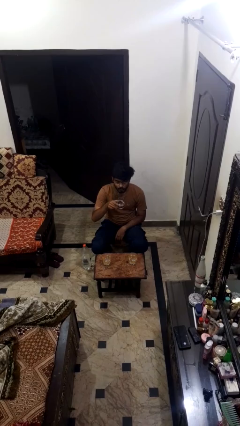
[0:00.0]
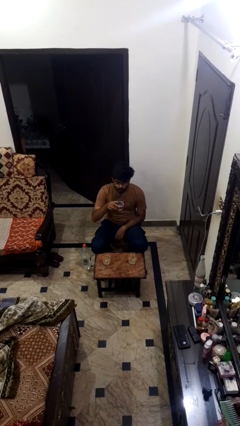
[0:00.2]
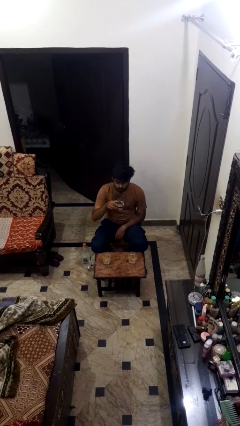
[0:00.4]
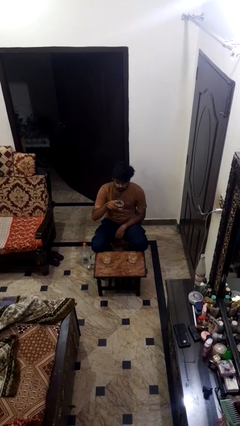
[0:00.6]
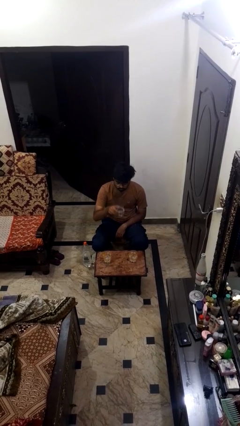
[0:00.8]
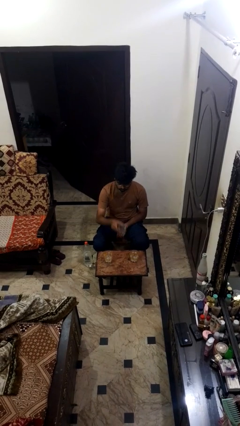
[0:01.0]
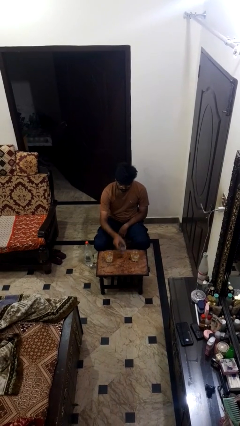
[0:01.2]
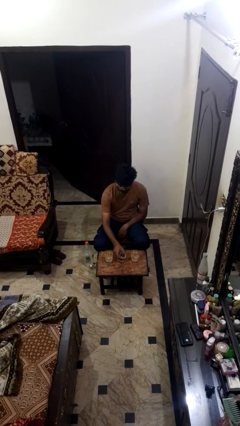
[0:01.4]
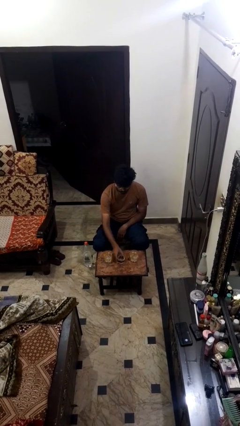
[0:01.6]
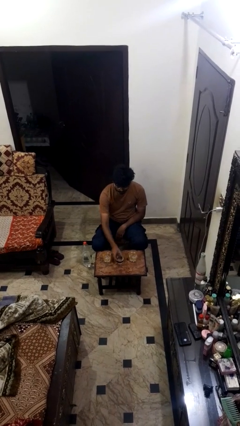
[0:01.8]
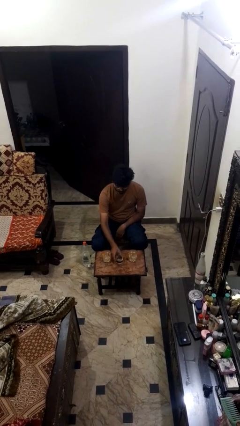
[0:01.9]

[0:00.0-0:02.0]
person puts down object on table

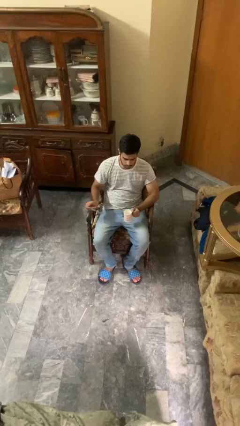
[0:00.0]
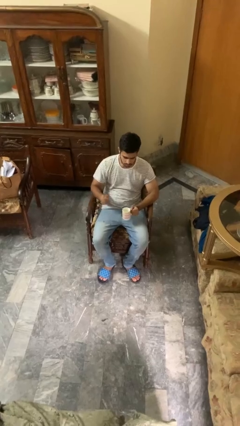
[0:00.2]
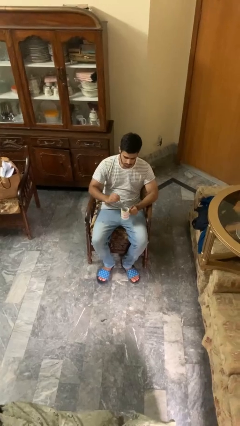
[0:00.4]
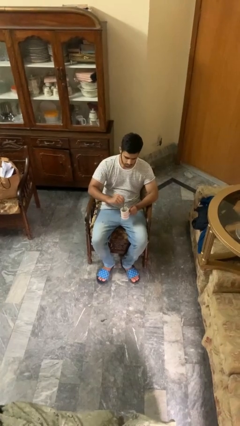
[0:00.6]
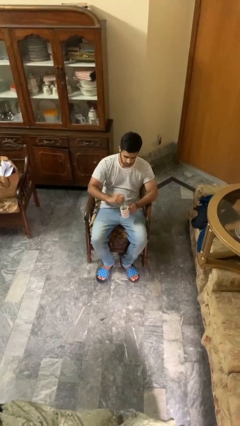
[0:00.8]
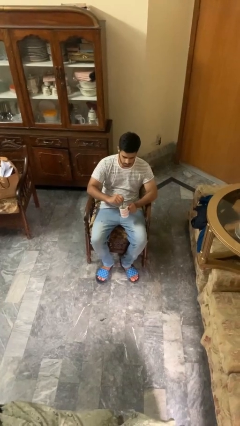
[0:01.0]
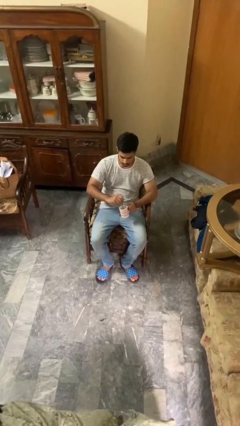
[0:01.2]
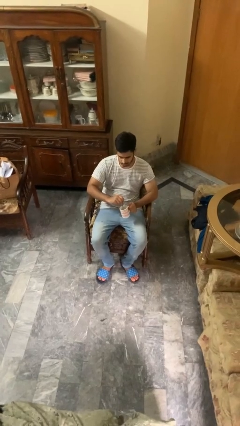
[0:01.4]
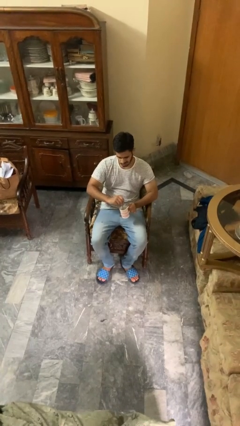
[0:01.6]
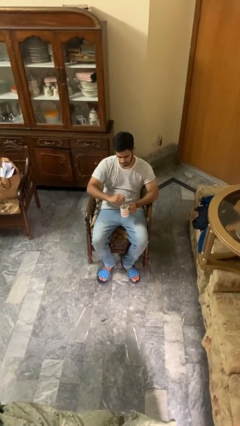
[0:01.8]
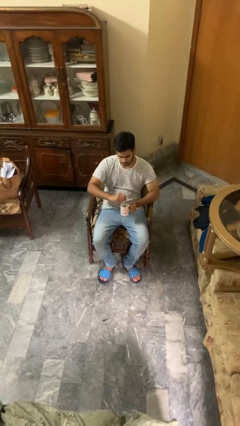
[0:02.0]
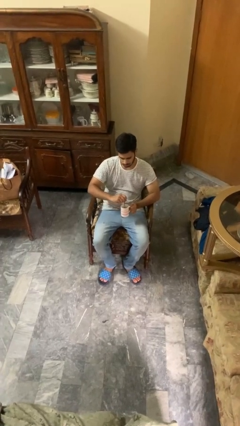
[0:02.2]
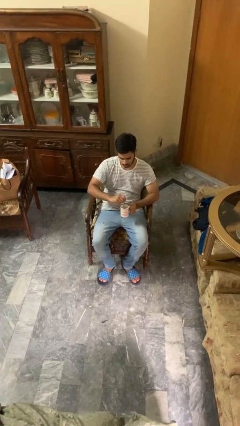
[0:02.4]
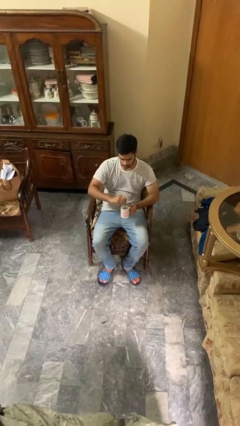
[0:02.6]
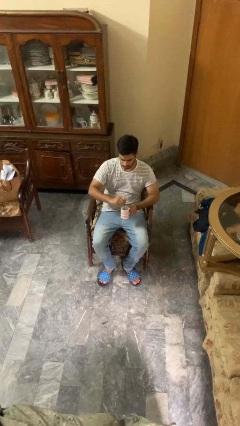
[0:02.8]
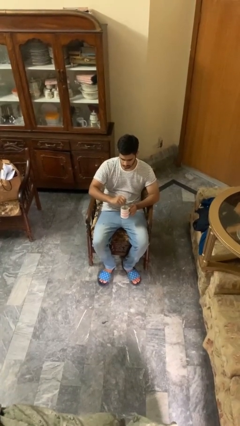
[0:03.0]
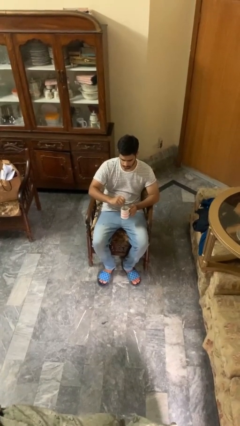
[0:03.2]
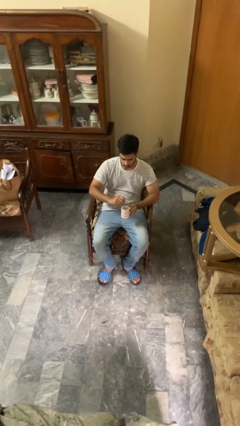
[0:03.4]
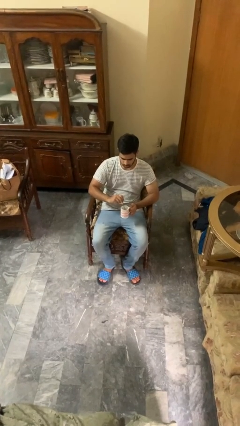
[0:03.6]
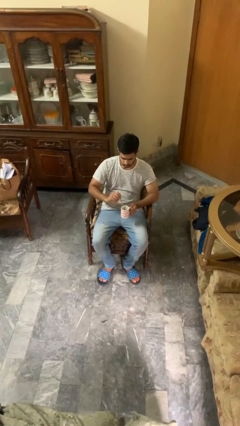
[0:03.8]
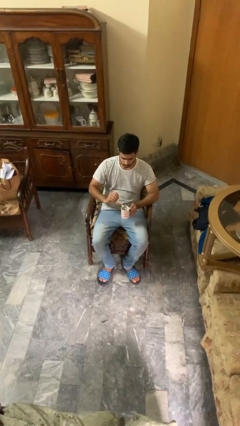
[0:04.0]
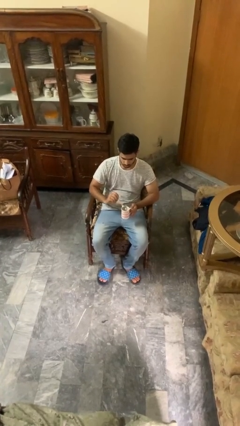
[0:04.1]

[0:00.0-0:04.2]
person stirs mug

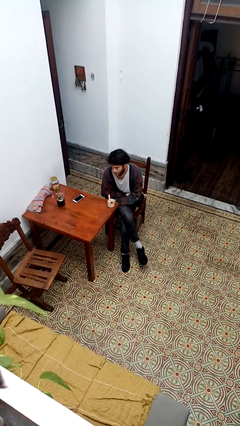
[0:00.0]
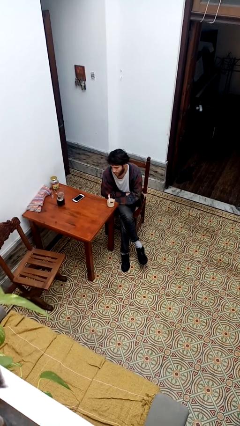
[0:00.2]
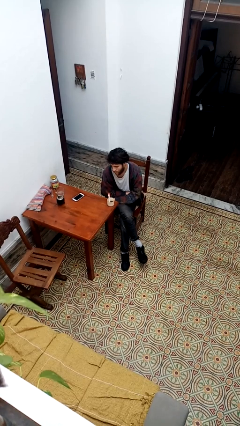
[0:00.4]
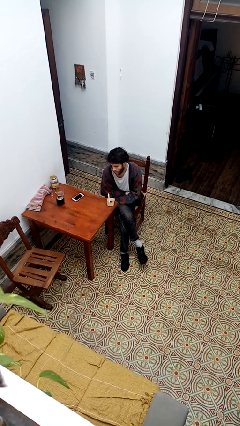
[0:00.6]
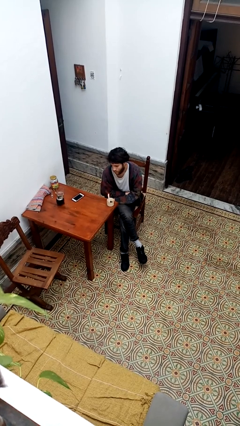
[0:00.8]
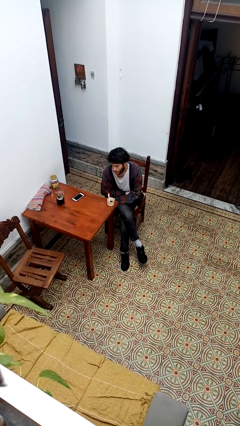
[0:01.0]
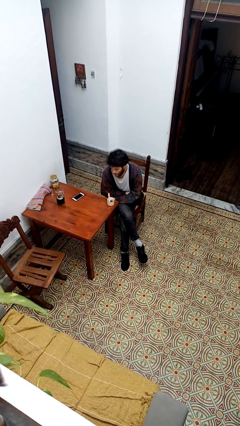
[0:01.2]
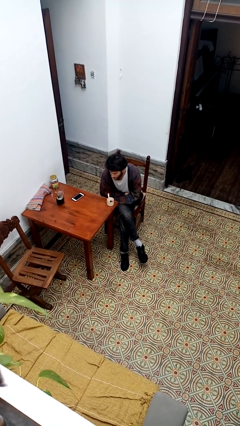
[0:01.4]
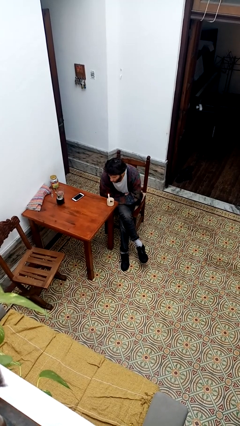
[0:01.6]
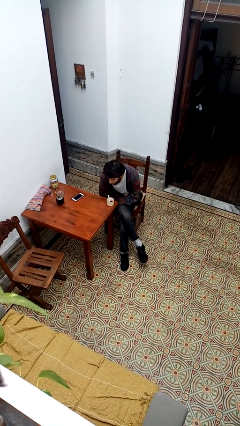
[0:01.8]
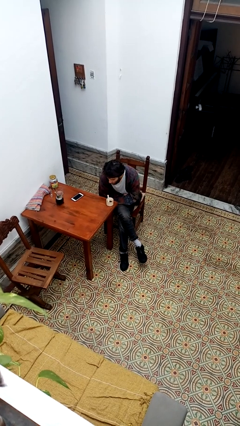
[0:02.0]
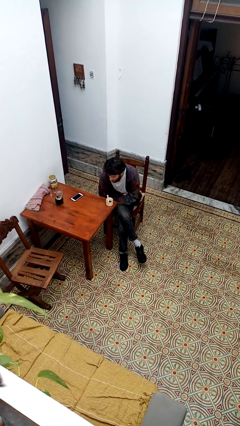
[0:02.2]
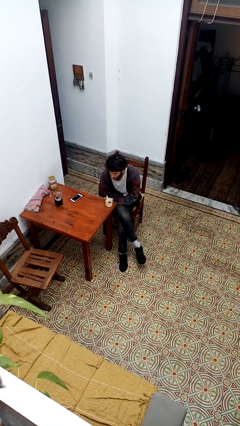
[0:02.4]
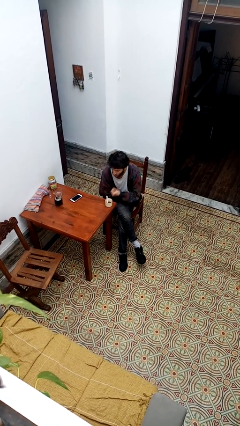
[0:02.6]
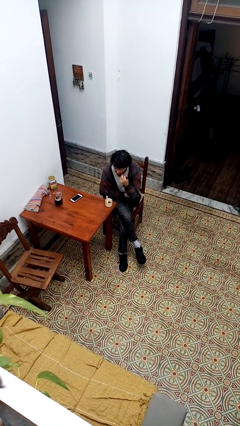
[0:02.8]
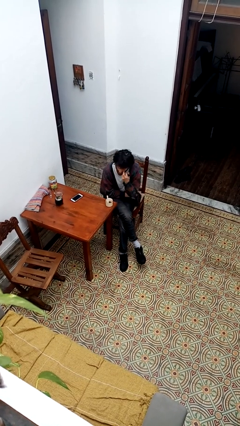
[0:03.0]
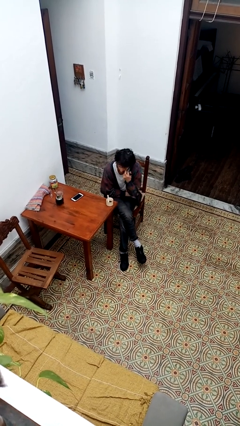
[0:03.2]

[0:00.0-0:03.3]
person extinguishes candle

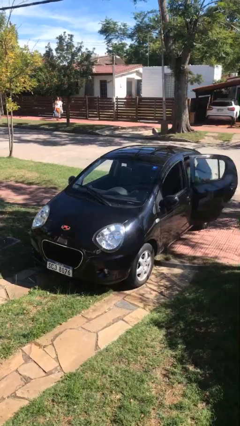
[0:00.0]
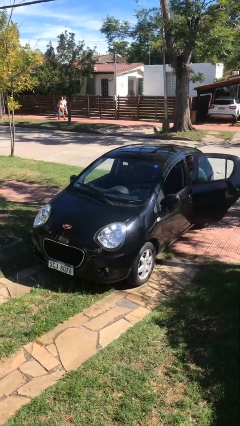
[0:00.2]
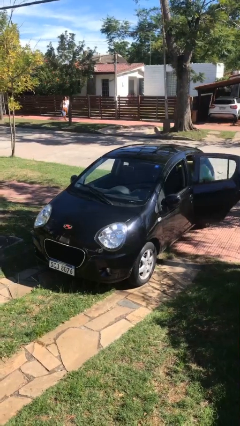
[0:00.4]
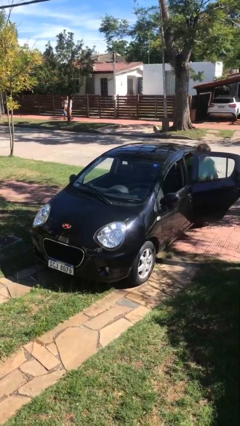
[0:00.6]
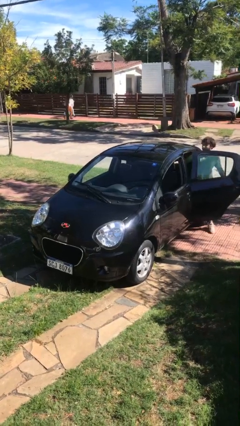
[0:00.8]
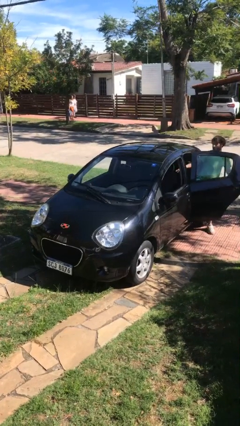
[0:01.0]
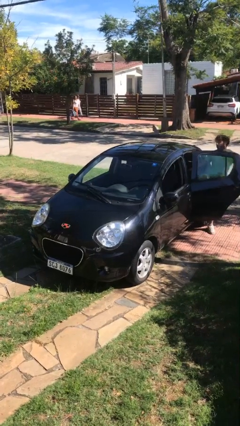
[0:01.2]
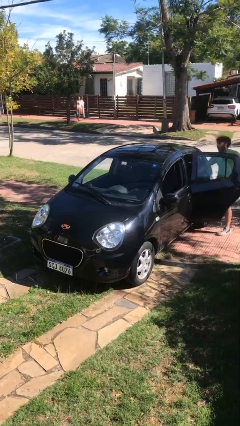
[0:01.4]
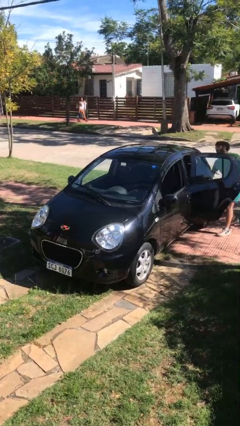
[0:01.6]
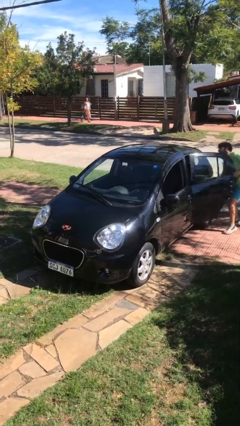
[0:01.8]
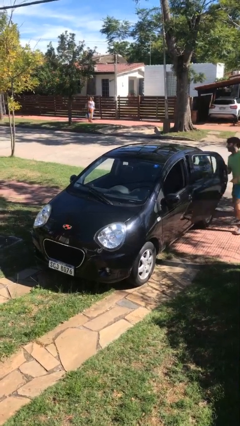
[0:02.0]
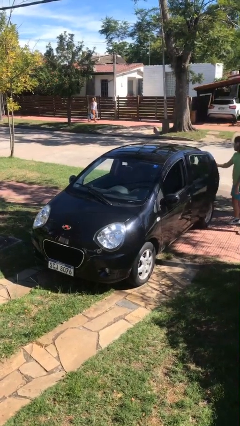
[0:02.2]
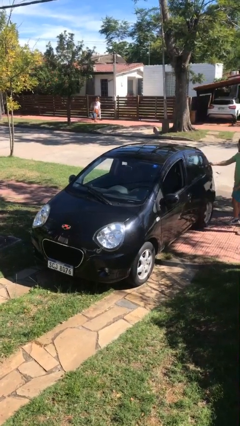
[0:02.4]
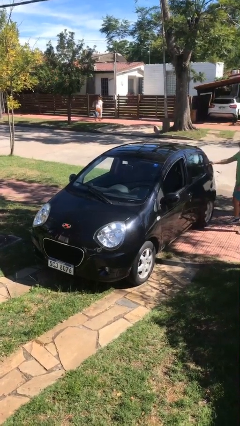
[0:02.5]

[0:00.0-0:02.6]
car drops off person

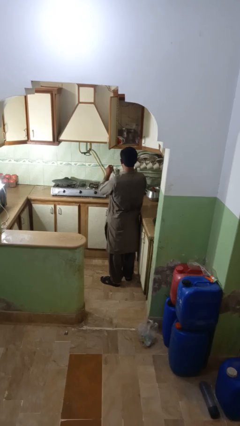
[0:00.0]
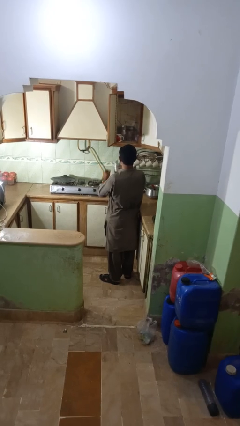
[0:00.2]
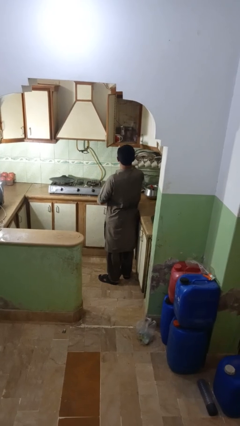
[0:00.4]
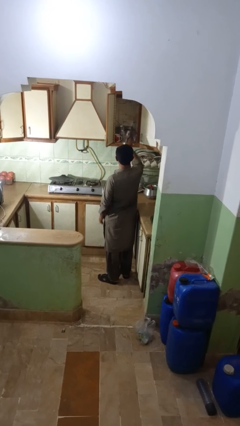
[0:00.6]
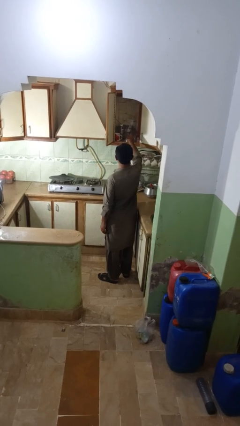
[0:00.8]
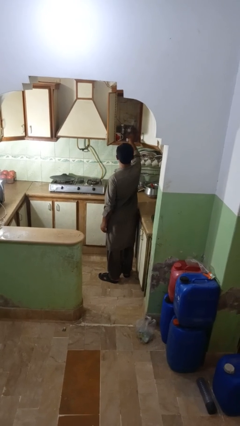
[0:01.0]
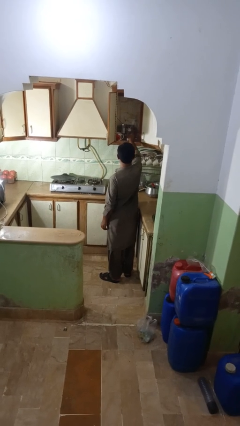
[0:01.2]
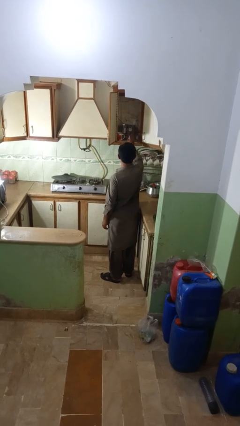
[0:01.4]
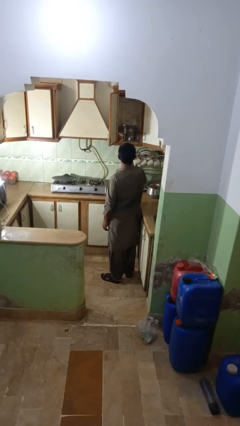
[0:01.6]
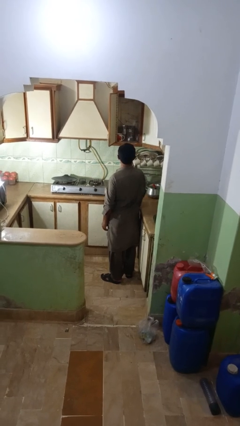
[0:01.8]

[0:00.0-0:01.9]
person puts object into kitchen drawer

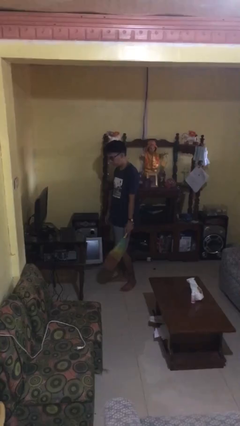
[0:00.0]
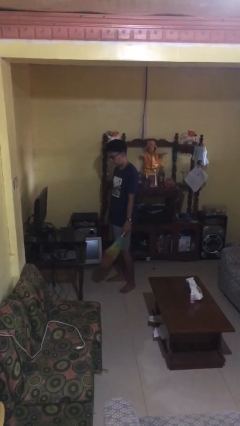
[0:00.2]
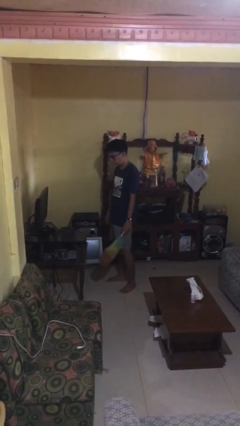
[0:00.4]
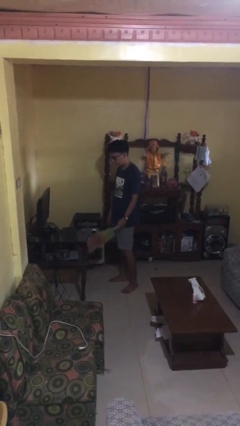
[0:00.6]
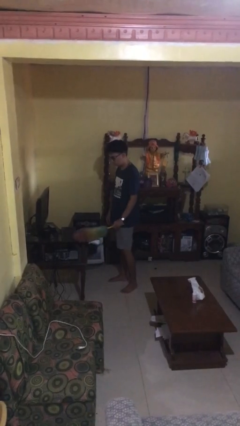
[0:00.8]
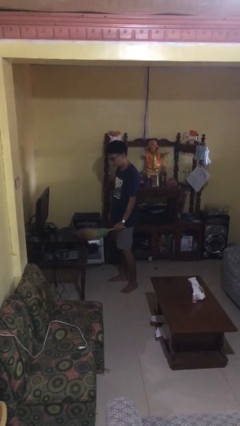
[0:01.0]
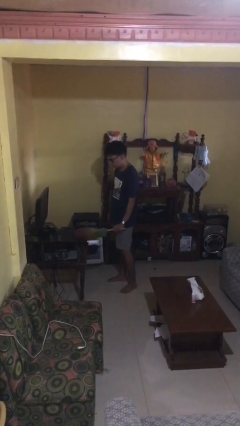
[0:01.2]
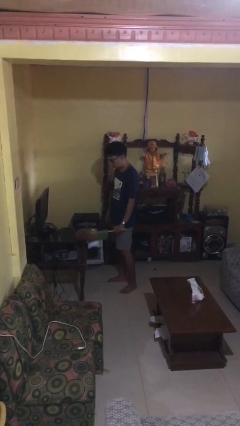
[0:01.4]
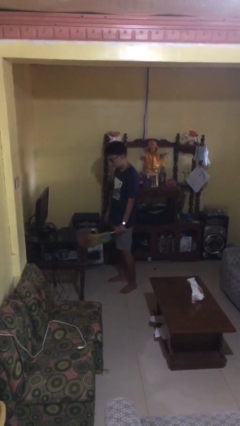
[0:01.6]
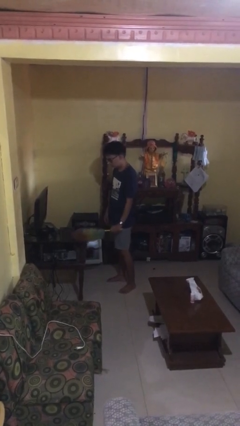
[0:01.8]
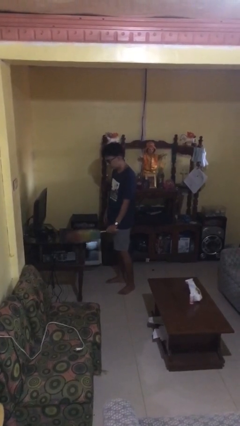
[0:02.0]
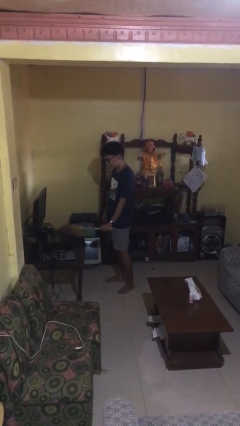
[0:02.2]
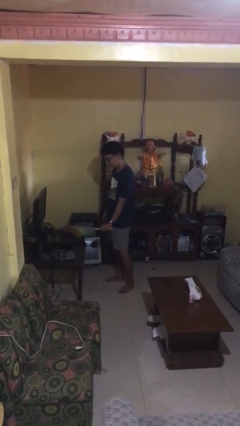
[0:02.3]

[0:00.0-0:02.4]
person dusts furniture

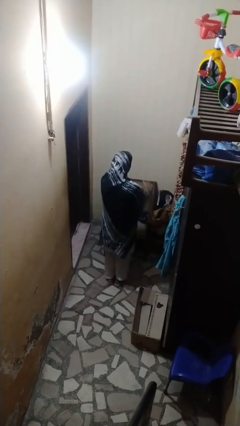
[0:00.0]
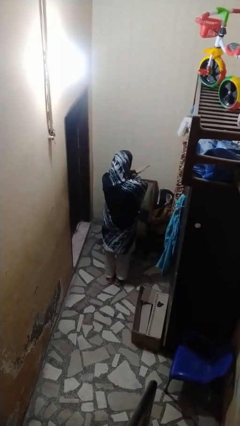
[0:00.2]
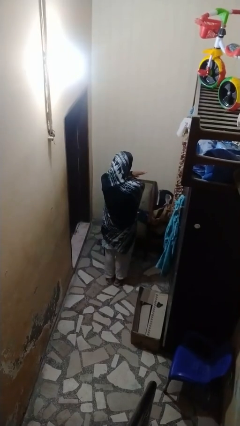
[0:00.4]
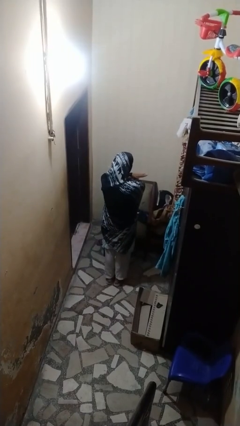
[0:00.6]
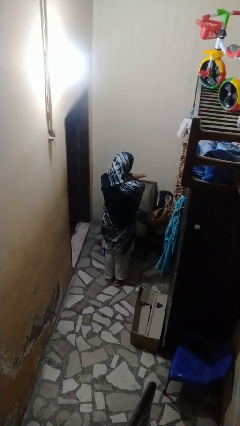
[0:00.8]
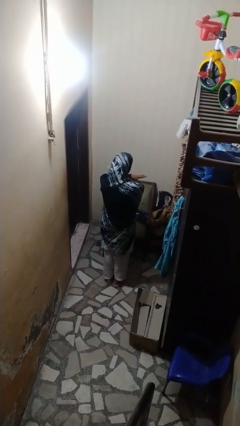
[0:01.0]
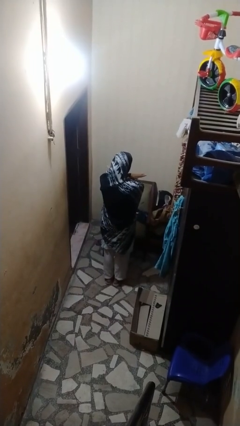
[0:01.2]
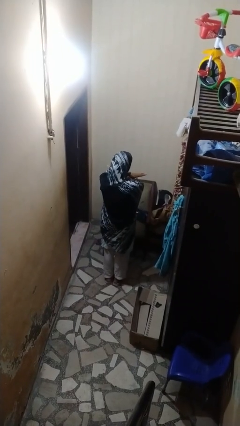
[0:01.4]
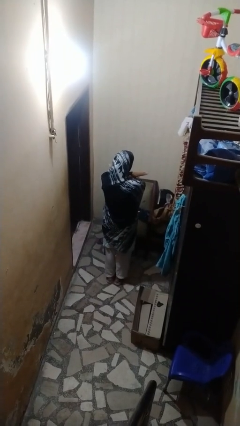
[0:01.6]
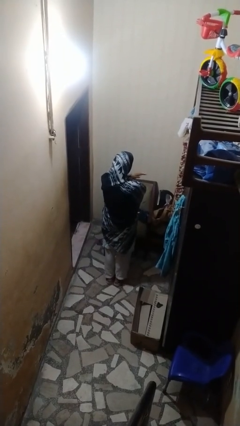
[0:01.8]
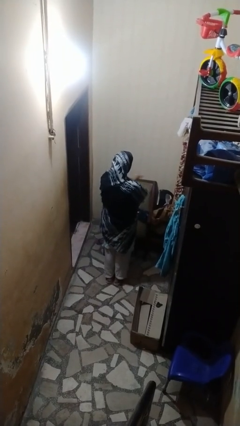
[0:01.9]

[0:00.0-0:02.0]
person gestures arms x
